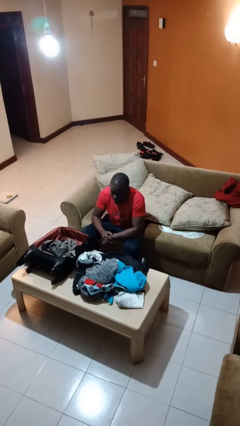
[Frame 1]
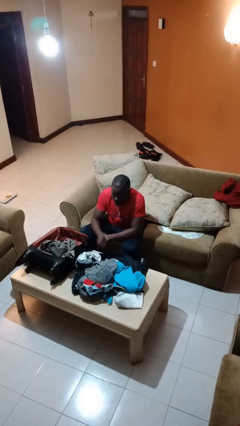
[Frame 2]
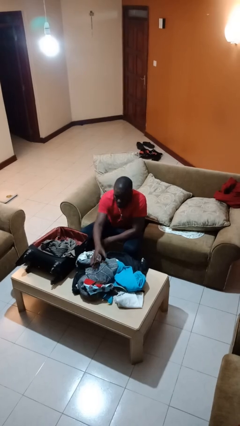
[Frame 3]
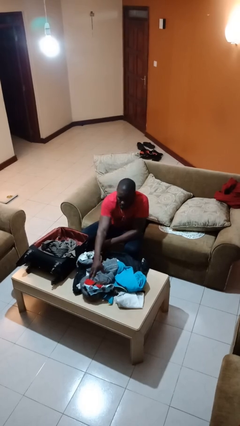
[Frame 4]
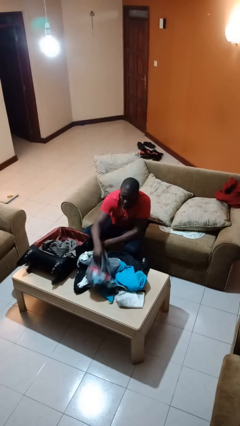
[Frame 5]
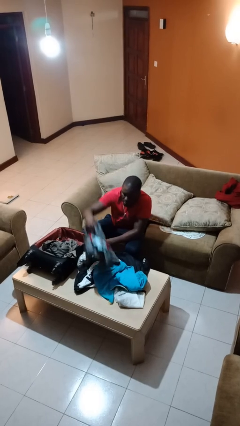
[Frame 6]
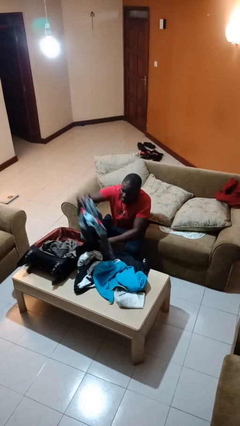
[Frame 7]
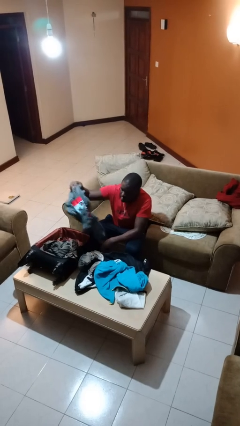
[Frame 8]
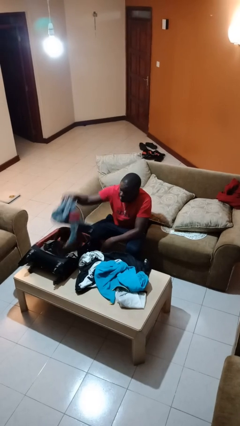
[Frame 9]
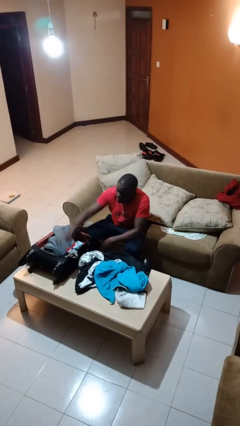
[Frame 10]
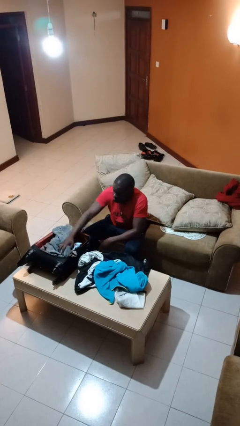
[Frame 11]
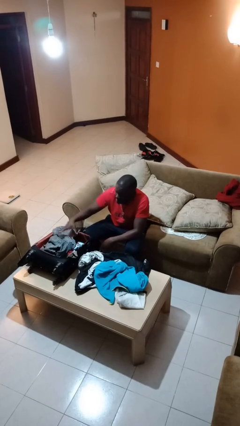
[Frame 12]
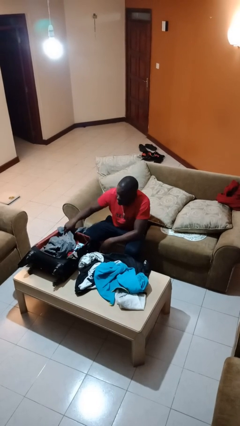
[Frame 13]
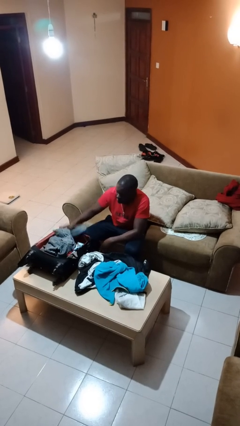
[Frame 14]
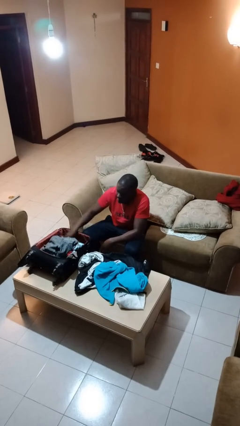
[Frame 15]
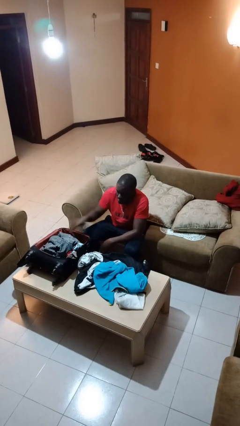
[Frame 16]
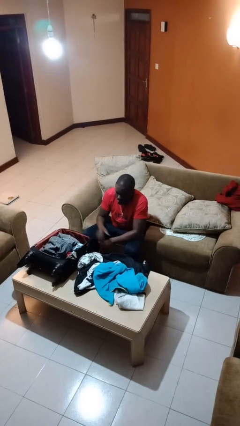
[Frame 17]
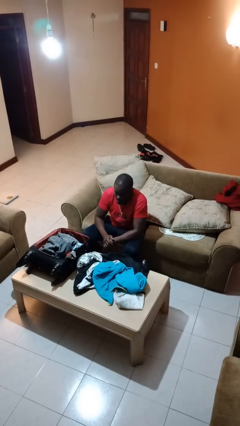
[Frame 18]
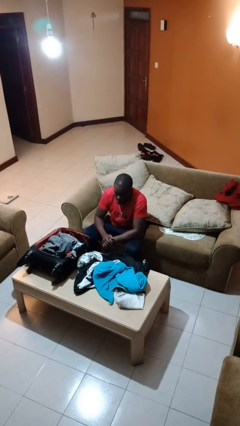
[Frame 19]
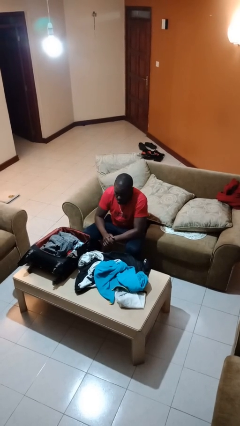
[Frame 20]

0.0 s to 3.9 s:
person loads clothes into suitcase

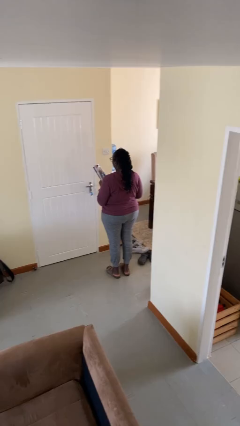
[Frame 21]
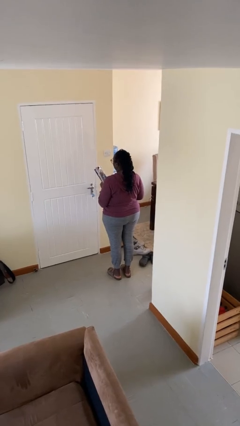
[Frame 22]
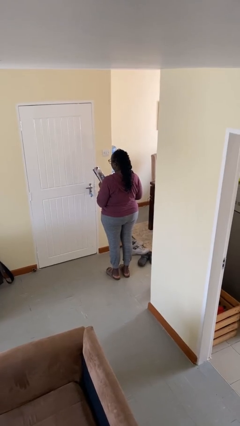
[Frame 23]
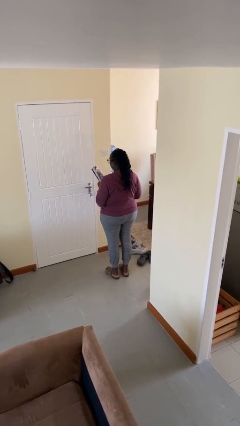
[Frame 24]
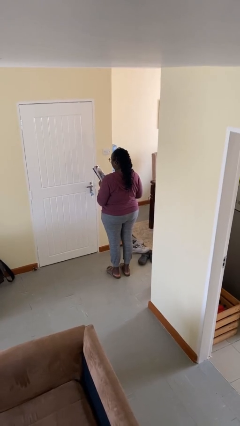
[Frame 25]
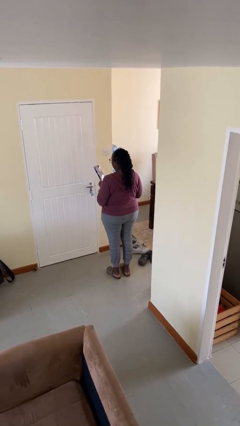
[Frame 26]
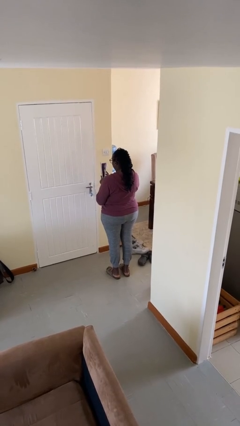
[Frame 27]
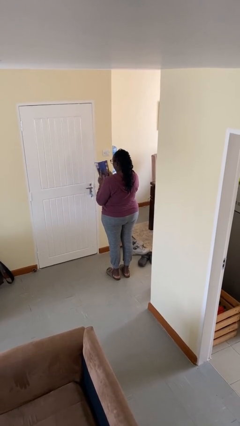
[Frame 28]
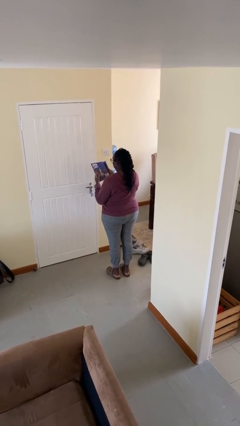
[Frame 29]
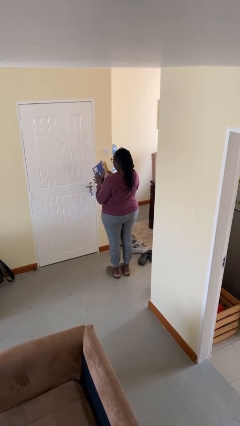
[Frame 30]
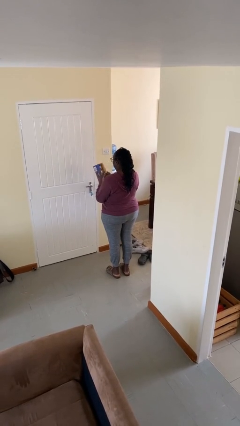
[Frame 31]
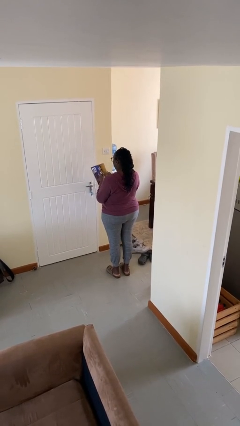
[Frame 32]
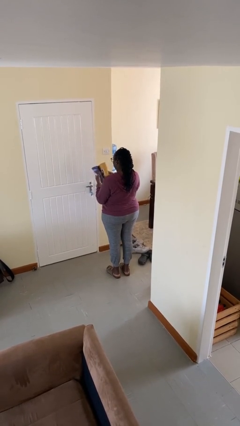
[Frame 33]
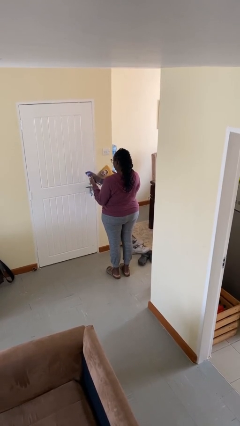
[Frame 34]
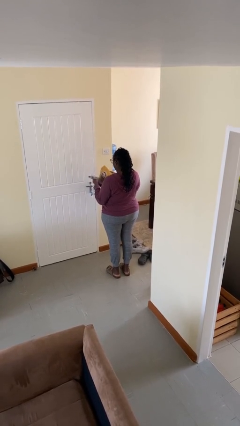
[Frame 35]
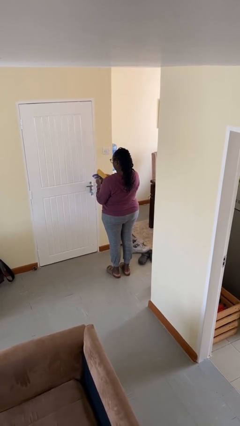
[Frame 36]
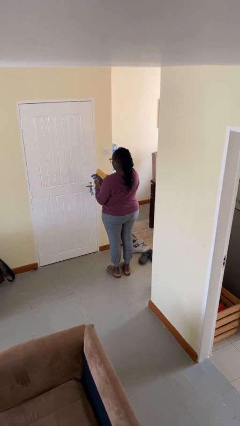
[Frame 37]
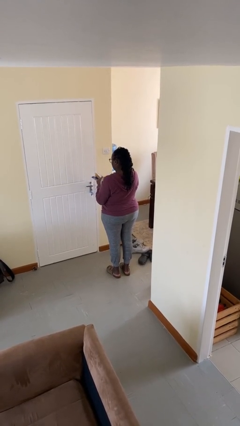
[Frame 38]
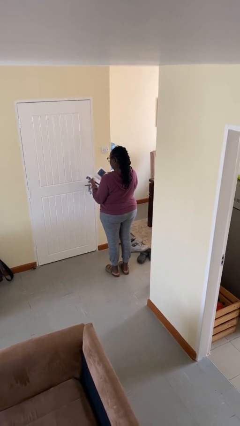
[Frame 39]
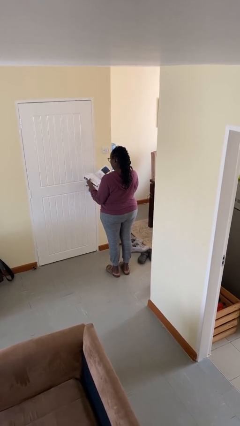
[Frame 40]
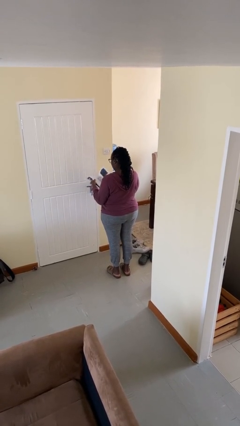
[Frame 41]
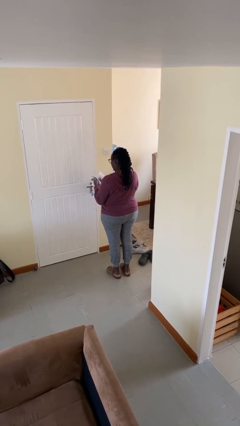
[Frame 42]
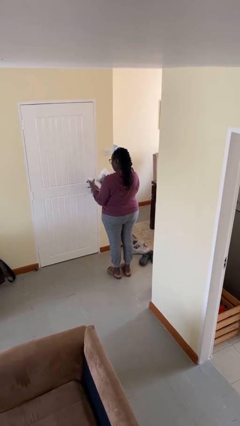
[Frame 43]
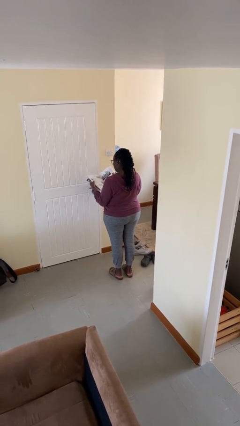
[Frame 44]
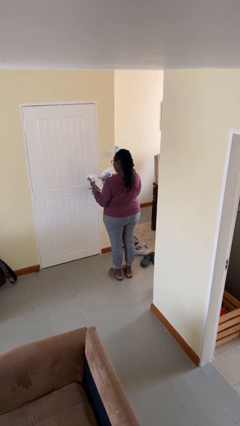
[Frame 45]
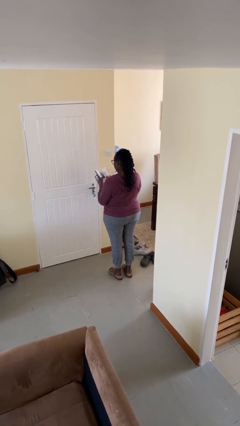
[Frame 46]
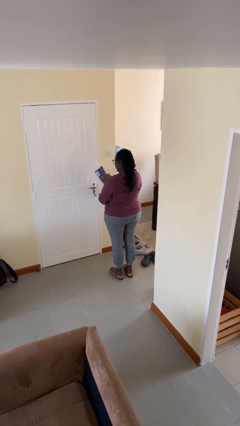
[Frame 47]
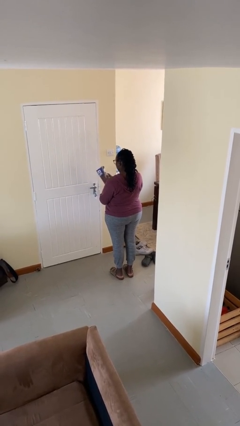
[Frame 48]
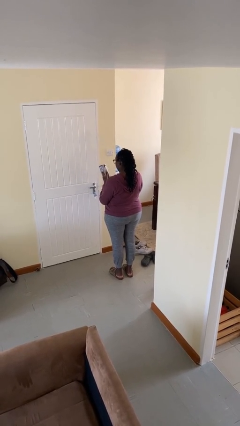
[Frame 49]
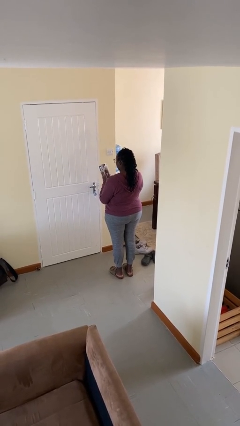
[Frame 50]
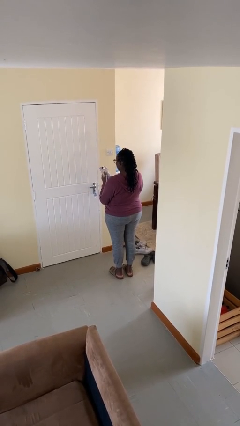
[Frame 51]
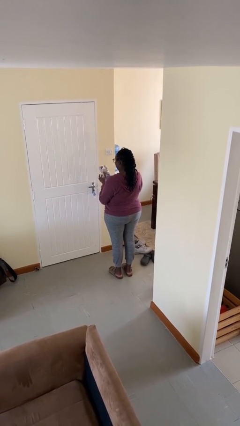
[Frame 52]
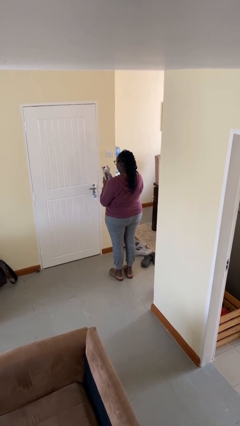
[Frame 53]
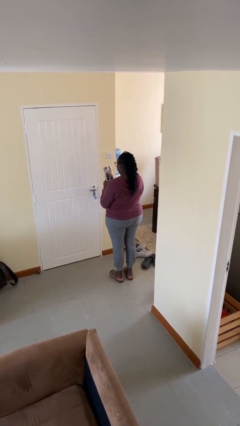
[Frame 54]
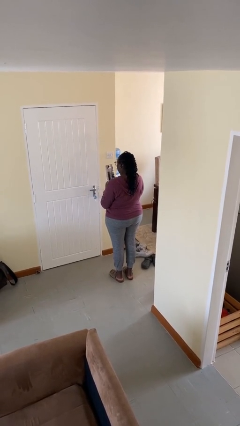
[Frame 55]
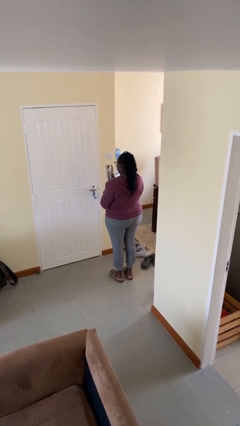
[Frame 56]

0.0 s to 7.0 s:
person reads magazine

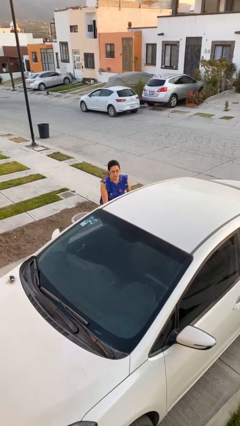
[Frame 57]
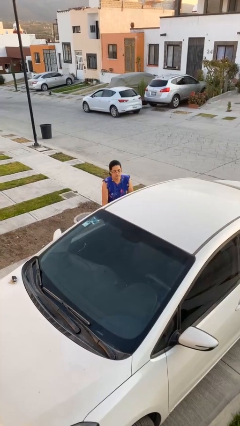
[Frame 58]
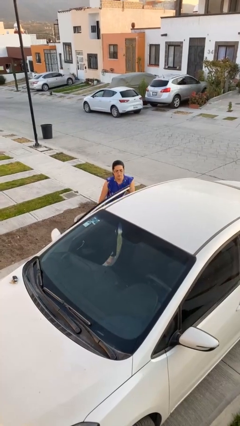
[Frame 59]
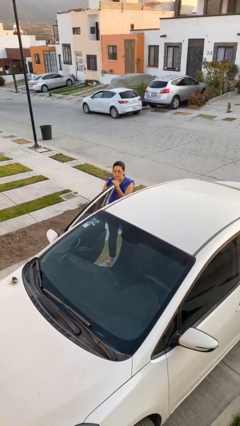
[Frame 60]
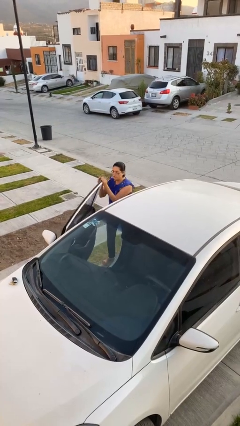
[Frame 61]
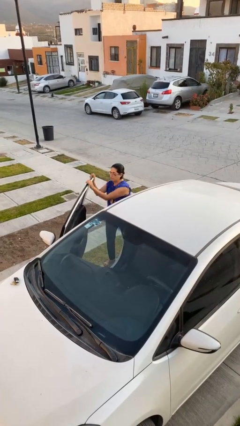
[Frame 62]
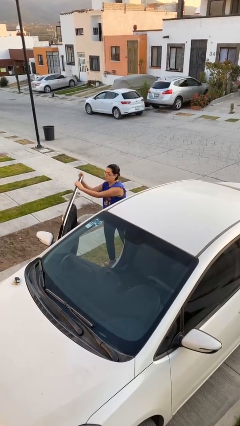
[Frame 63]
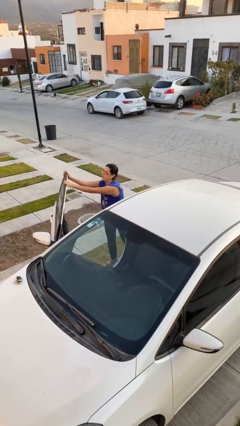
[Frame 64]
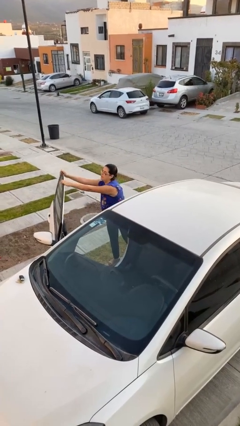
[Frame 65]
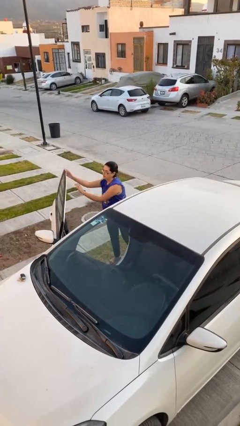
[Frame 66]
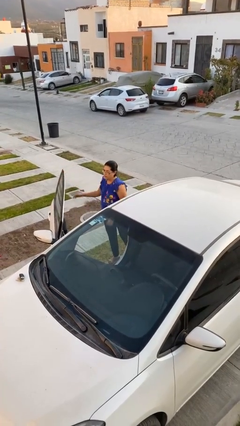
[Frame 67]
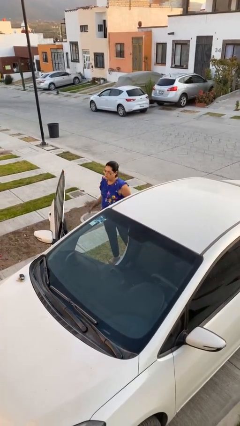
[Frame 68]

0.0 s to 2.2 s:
person opens car door

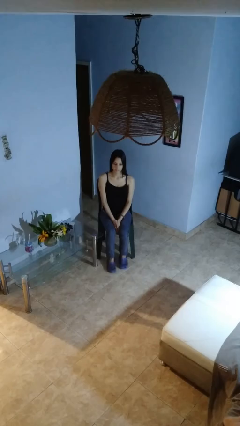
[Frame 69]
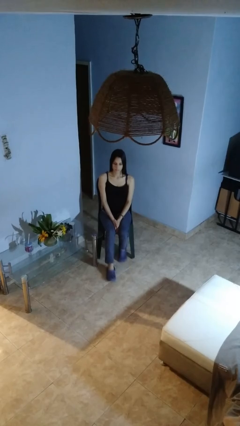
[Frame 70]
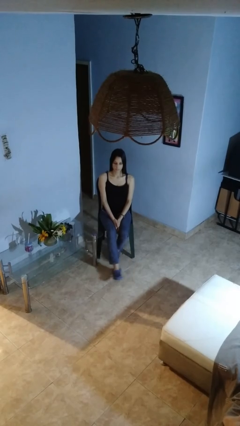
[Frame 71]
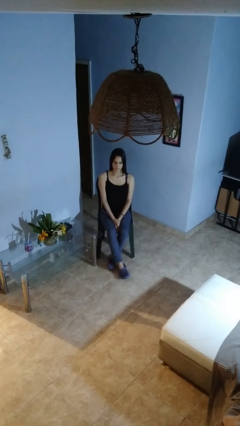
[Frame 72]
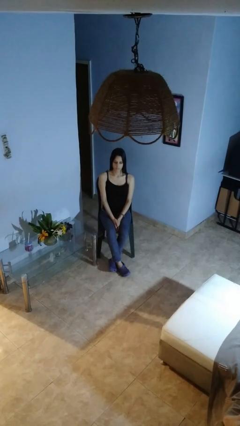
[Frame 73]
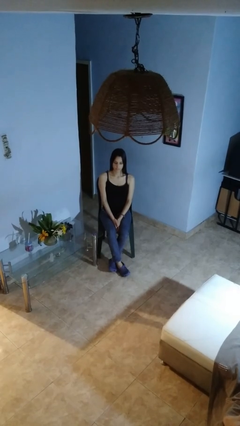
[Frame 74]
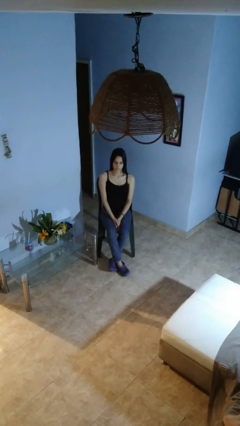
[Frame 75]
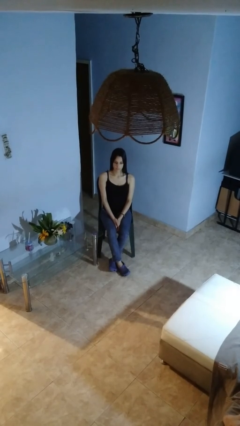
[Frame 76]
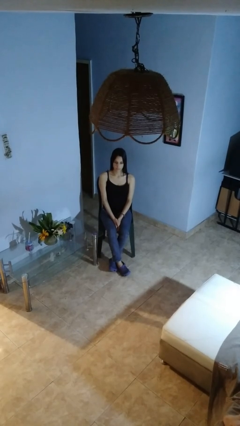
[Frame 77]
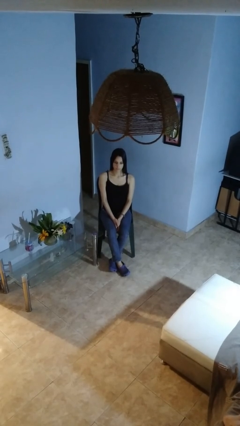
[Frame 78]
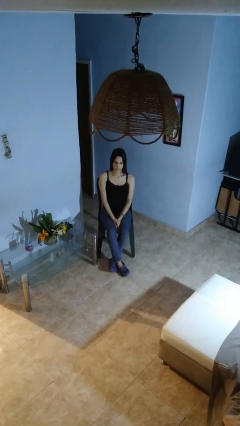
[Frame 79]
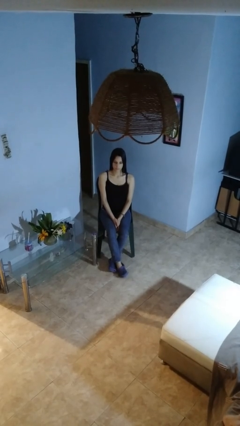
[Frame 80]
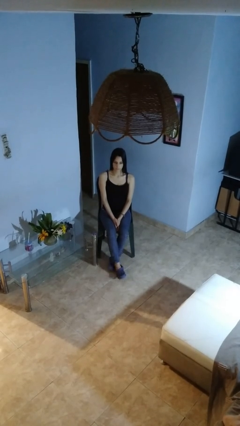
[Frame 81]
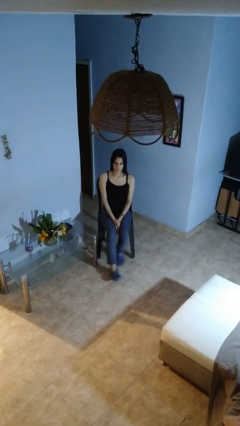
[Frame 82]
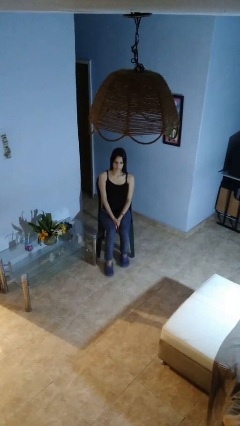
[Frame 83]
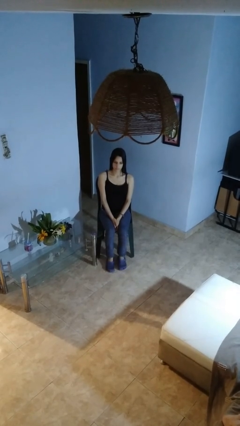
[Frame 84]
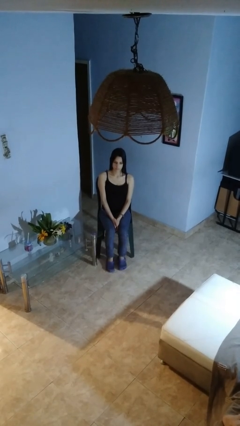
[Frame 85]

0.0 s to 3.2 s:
person crosses legs

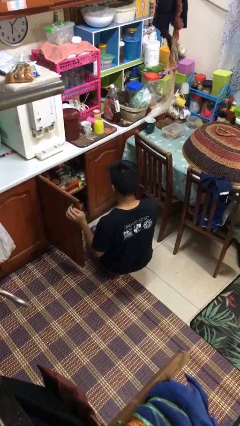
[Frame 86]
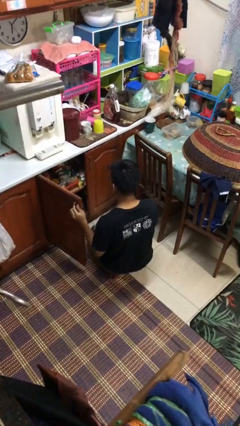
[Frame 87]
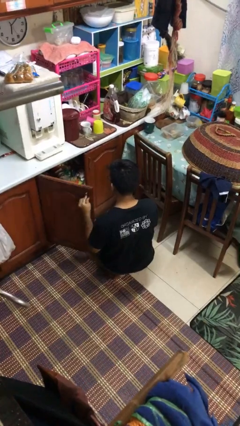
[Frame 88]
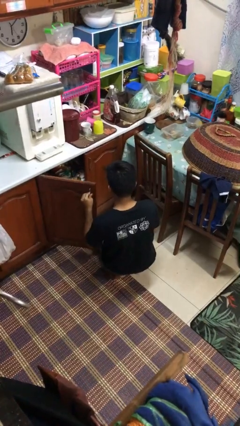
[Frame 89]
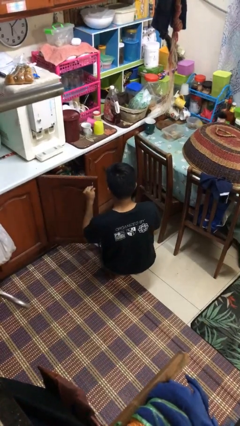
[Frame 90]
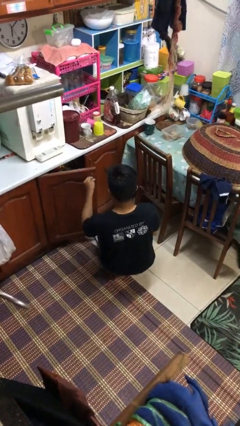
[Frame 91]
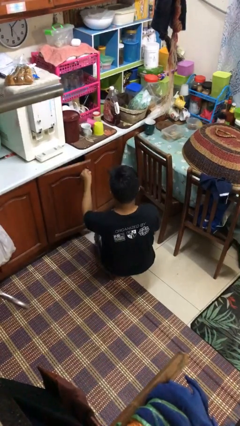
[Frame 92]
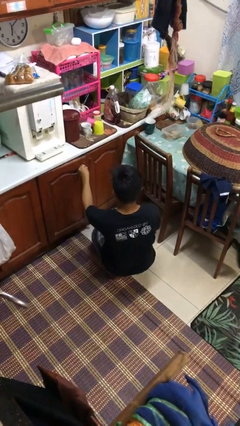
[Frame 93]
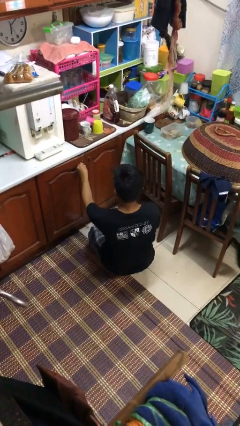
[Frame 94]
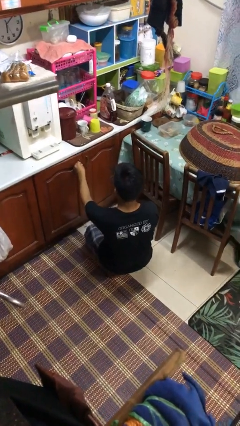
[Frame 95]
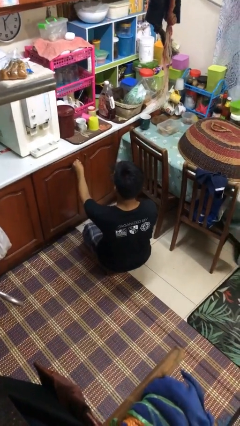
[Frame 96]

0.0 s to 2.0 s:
person closes kitchen drawer
